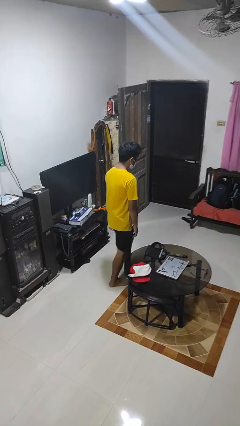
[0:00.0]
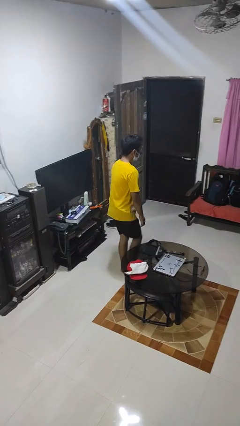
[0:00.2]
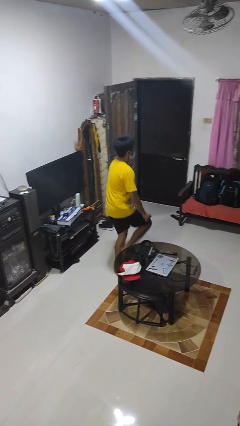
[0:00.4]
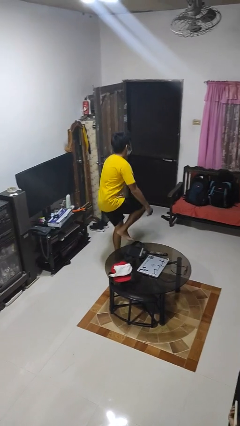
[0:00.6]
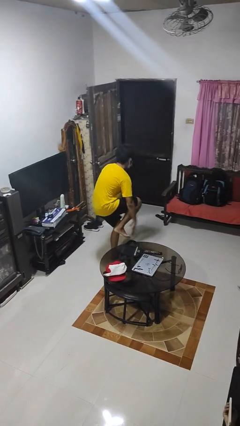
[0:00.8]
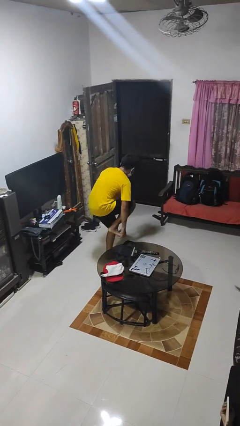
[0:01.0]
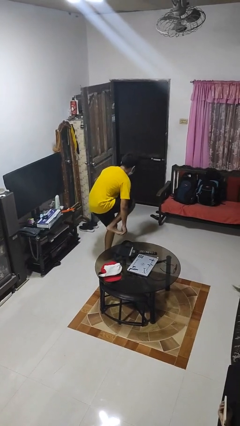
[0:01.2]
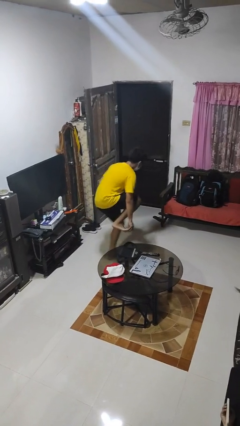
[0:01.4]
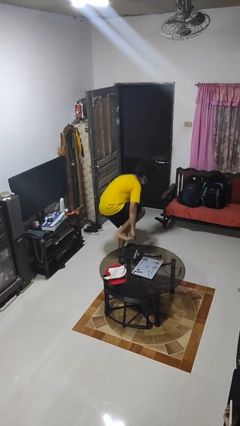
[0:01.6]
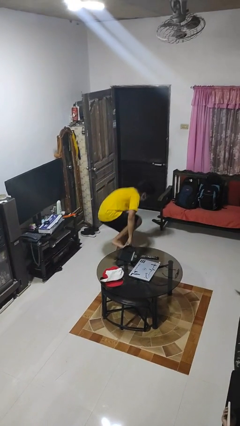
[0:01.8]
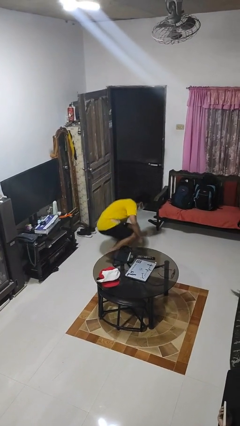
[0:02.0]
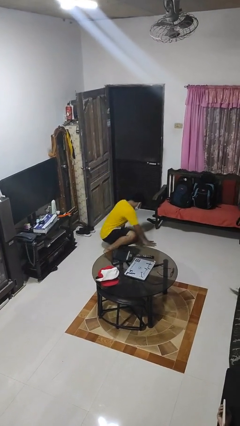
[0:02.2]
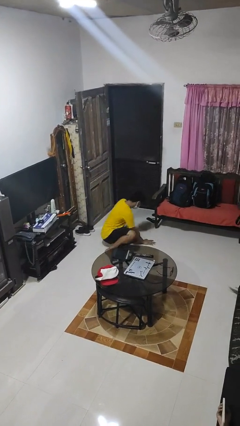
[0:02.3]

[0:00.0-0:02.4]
person trips on object on floor

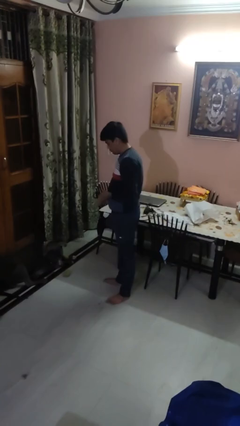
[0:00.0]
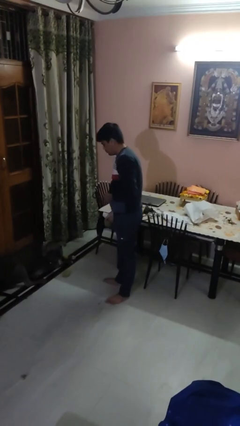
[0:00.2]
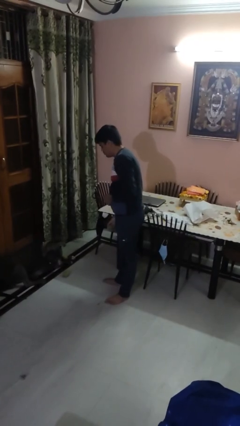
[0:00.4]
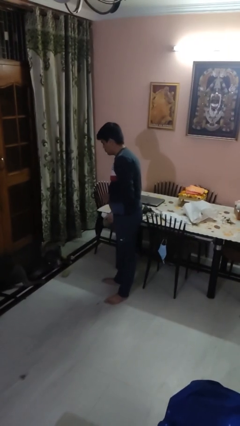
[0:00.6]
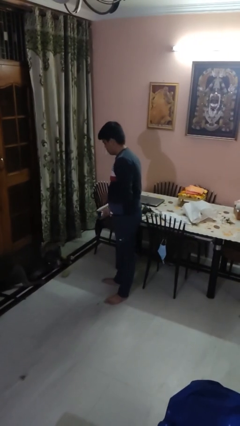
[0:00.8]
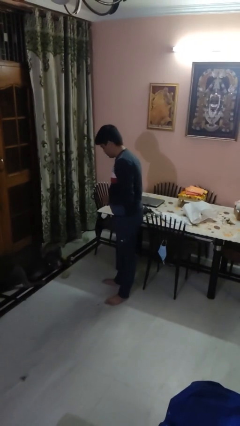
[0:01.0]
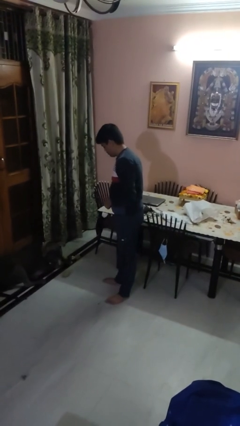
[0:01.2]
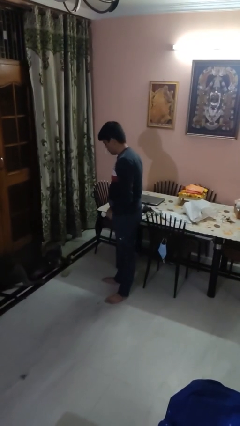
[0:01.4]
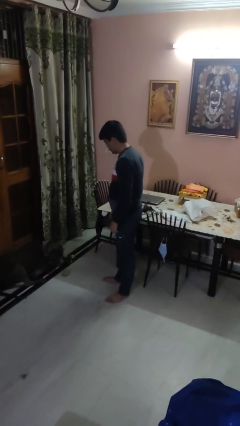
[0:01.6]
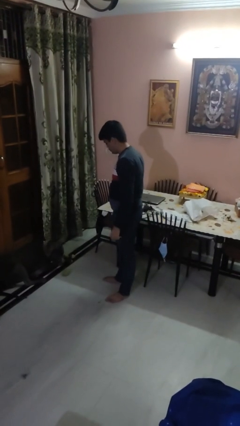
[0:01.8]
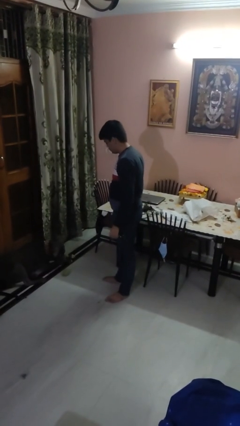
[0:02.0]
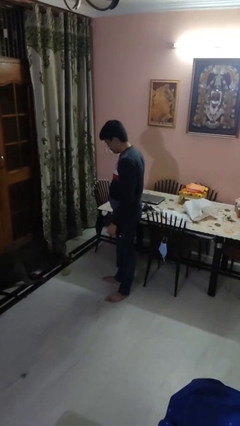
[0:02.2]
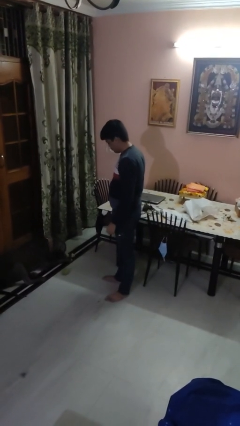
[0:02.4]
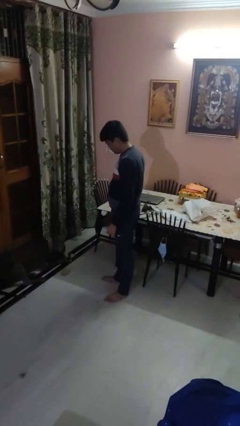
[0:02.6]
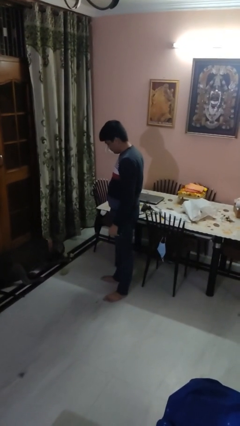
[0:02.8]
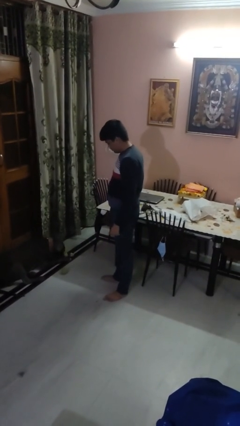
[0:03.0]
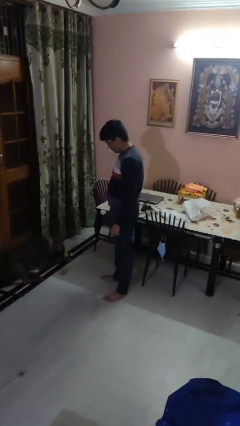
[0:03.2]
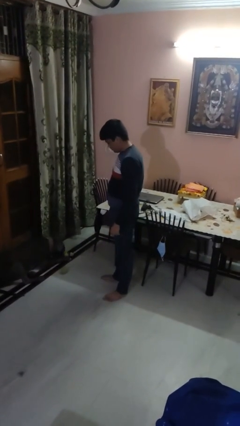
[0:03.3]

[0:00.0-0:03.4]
person throws object to dog

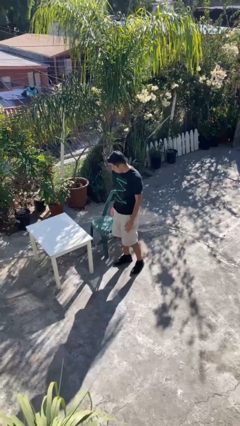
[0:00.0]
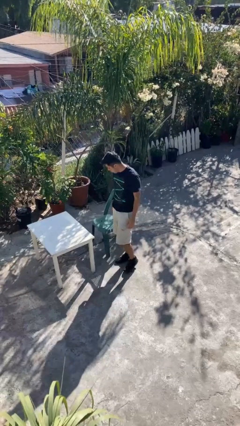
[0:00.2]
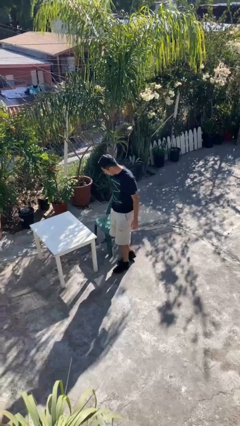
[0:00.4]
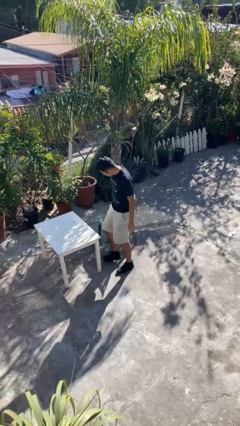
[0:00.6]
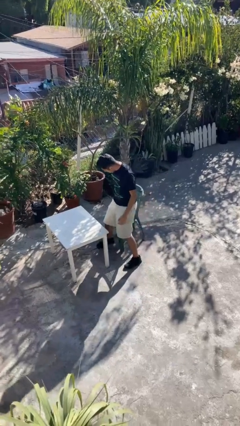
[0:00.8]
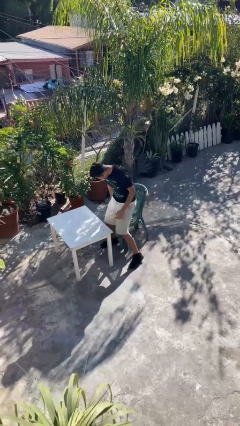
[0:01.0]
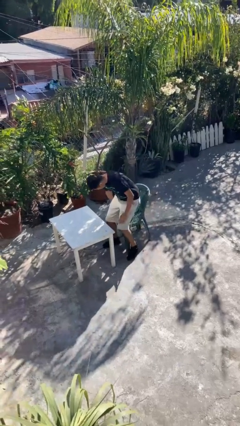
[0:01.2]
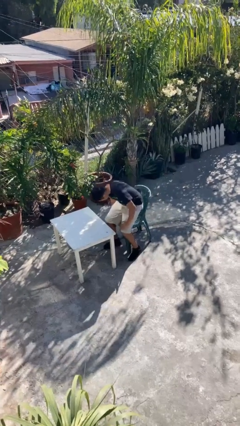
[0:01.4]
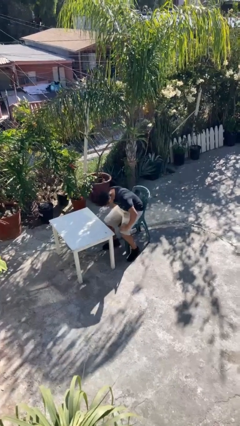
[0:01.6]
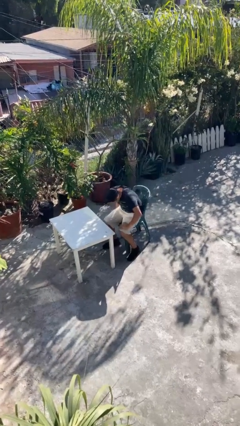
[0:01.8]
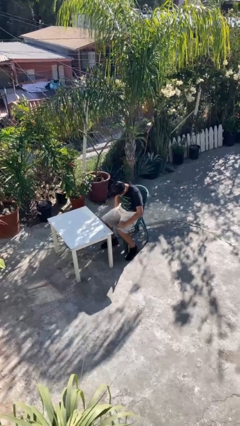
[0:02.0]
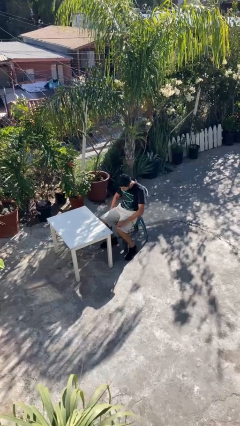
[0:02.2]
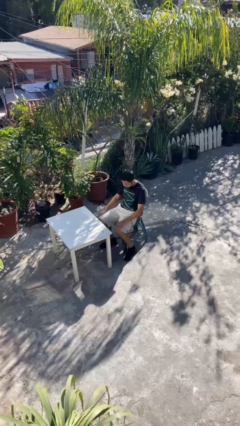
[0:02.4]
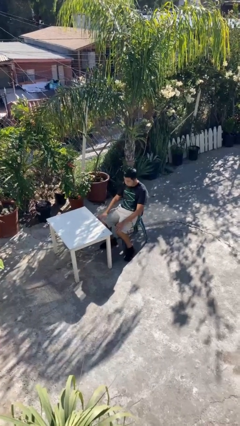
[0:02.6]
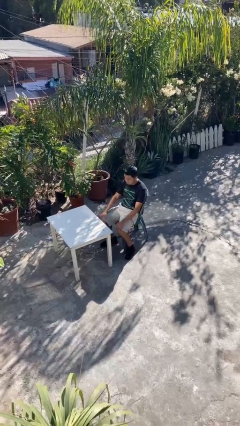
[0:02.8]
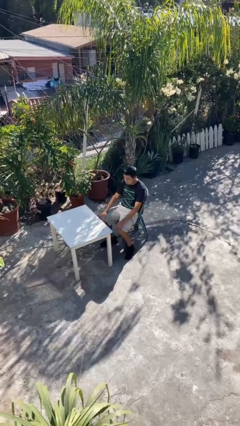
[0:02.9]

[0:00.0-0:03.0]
person sits down

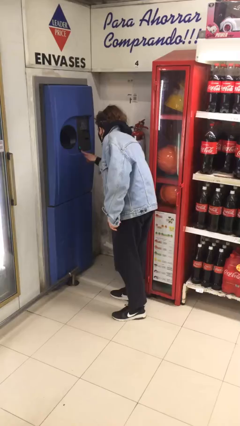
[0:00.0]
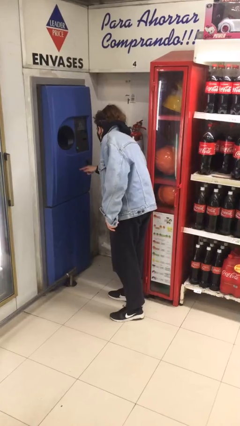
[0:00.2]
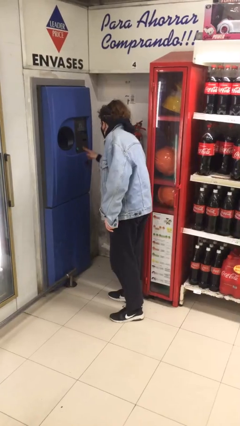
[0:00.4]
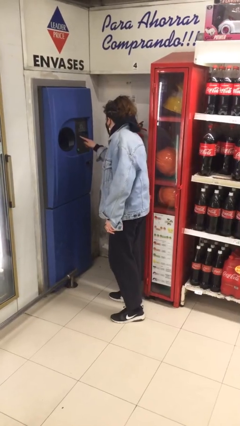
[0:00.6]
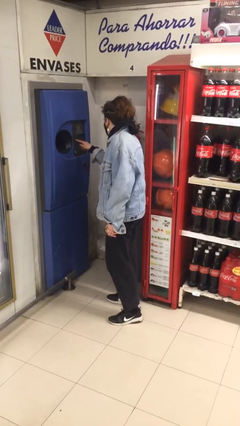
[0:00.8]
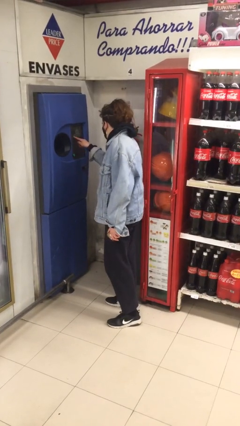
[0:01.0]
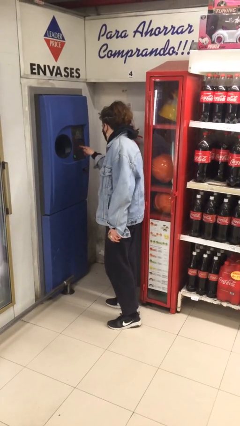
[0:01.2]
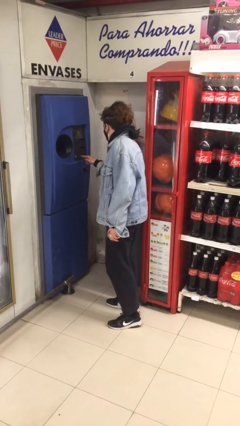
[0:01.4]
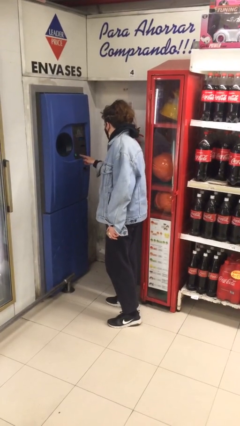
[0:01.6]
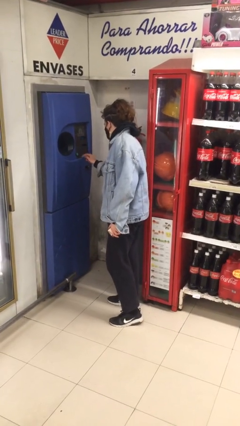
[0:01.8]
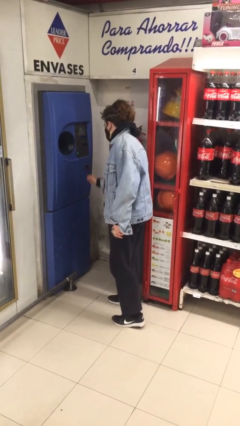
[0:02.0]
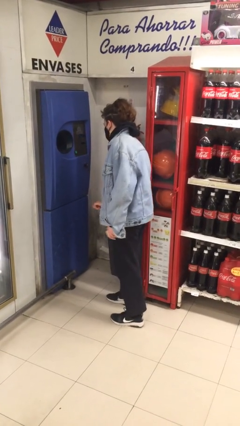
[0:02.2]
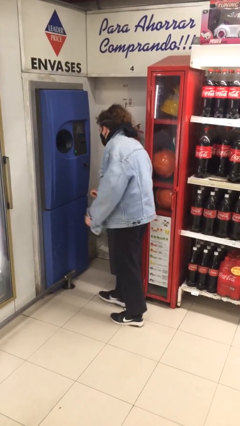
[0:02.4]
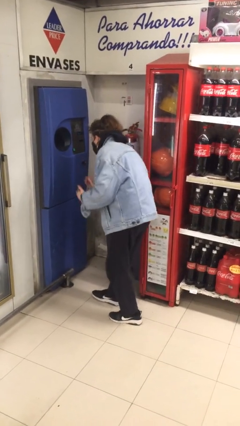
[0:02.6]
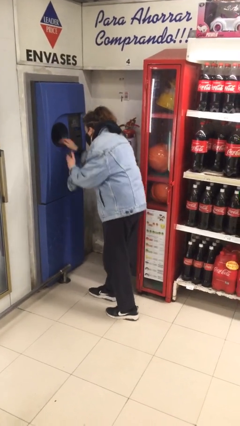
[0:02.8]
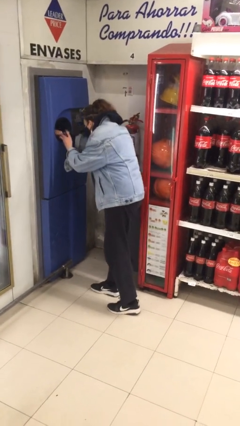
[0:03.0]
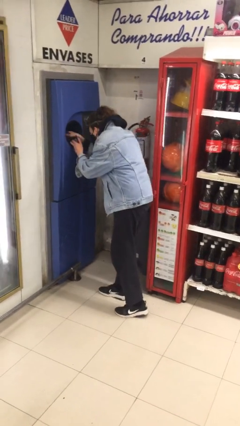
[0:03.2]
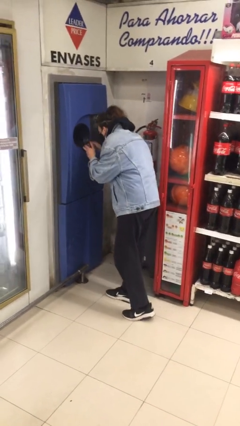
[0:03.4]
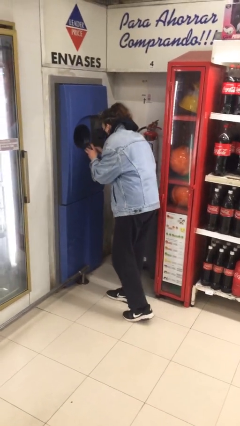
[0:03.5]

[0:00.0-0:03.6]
person purchases from machine

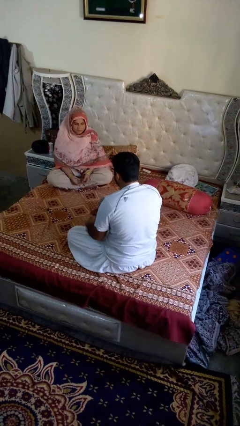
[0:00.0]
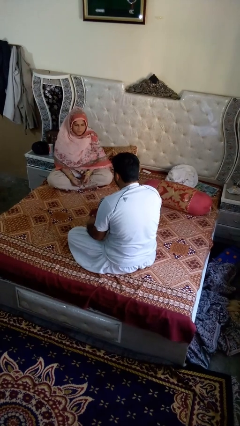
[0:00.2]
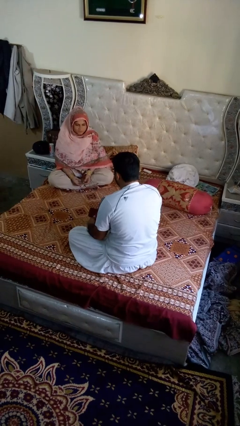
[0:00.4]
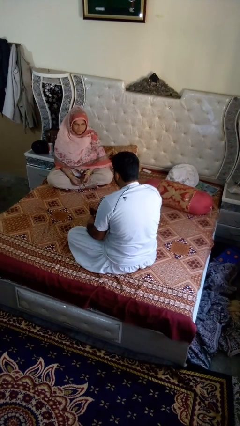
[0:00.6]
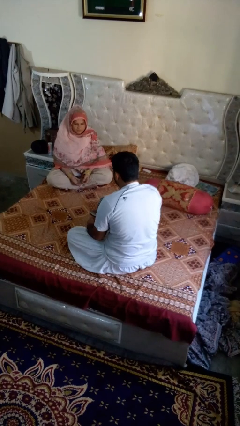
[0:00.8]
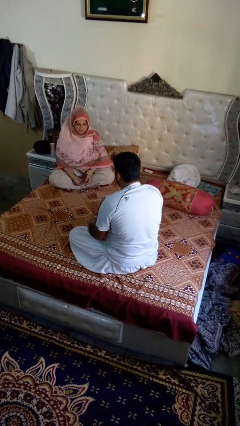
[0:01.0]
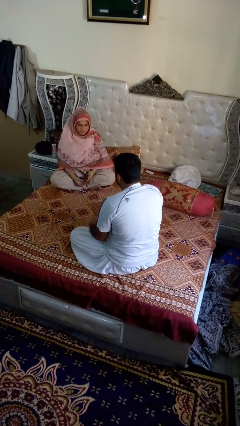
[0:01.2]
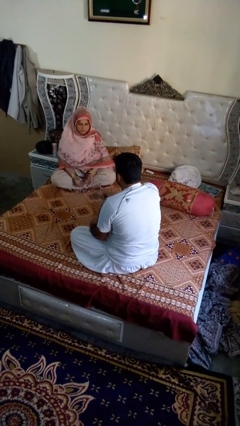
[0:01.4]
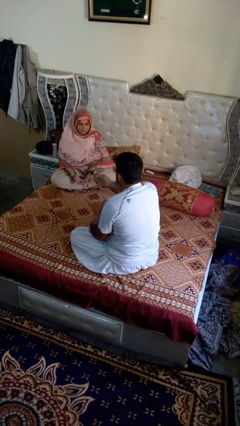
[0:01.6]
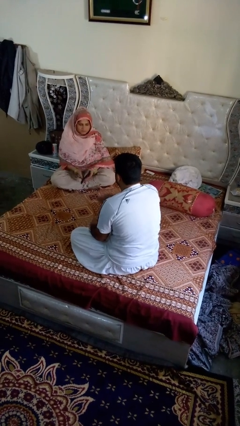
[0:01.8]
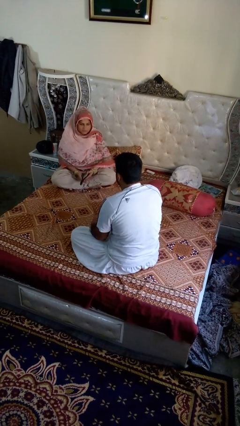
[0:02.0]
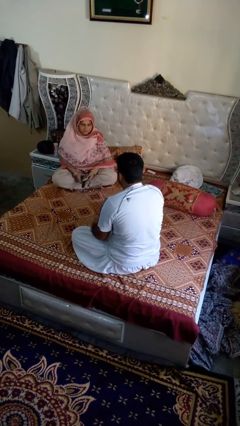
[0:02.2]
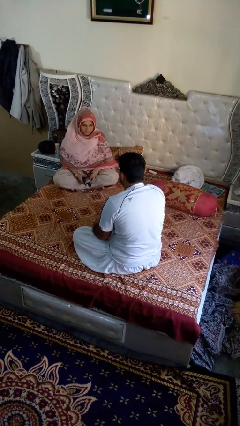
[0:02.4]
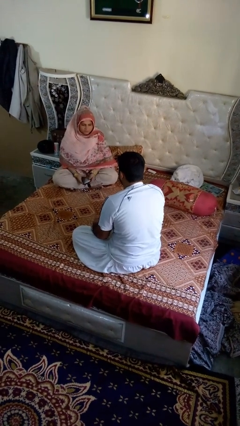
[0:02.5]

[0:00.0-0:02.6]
person throws object to person

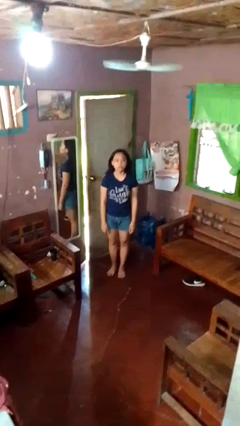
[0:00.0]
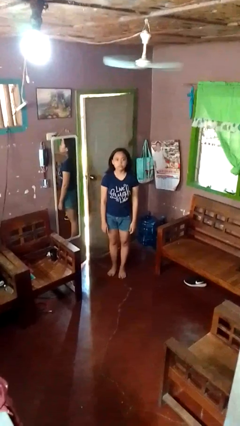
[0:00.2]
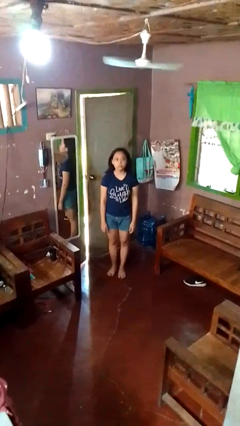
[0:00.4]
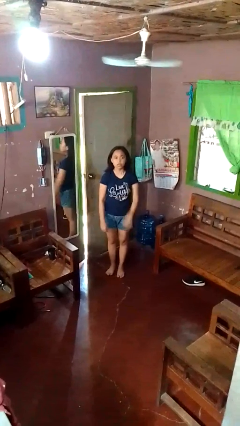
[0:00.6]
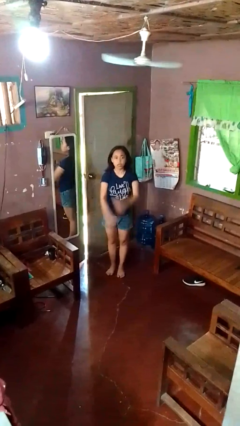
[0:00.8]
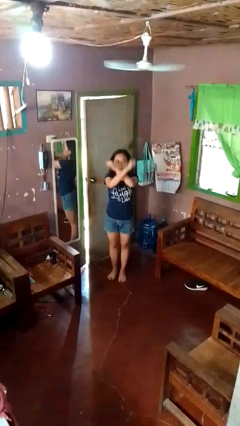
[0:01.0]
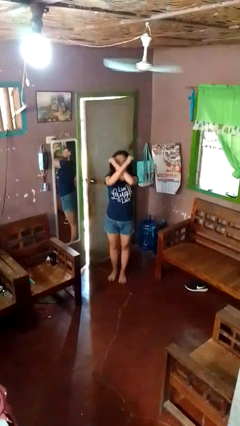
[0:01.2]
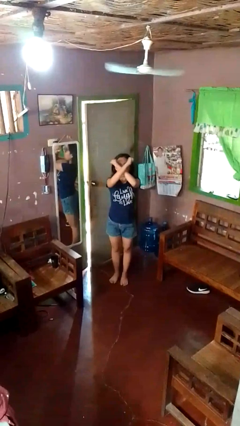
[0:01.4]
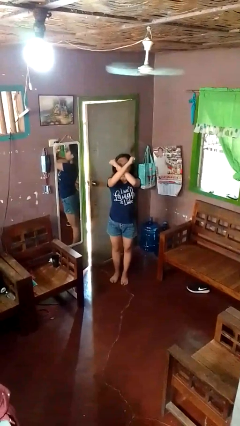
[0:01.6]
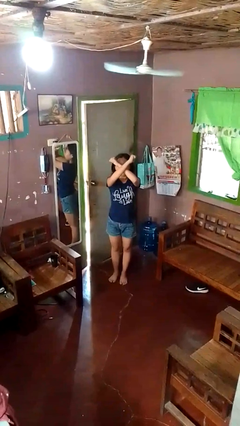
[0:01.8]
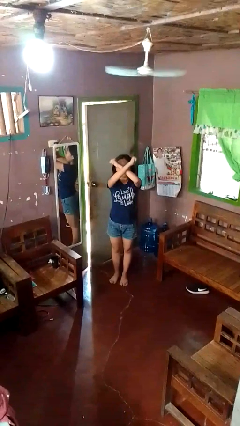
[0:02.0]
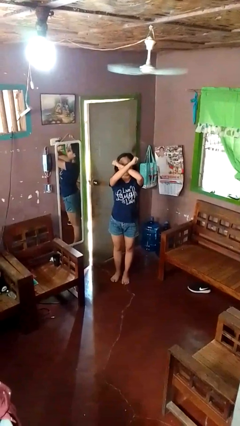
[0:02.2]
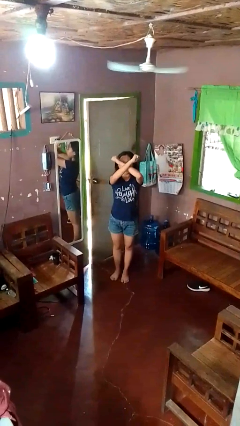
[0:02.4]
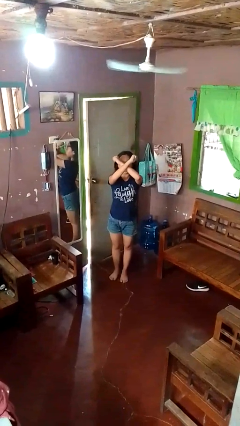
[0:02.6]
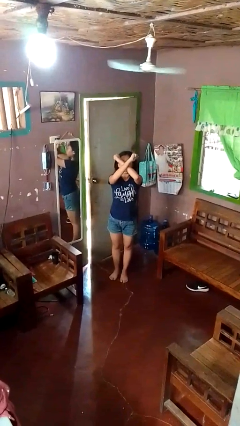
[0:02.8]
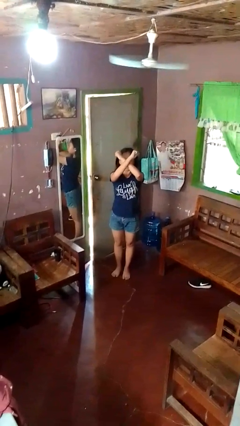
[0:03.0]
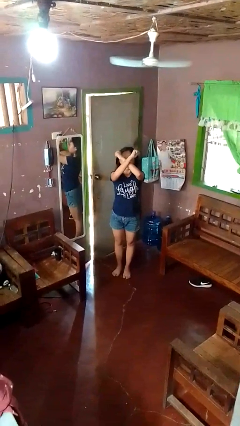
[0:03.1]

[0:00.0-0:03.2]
person gestures arms x
